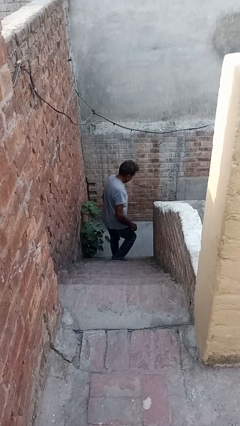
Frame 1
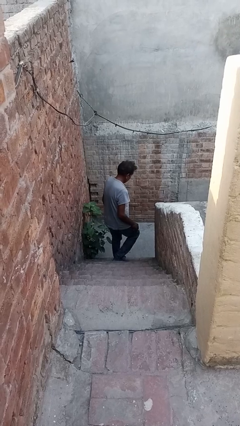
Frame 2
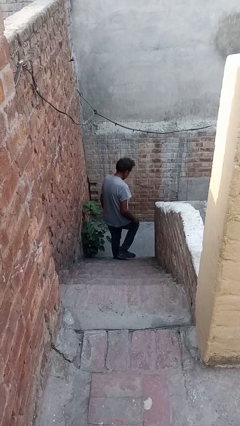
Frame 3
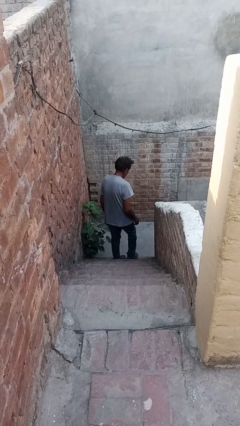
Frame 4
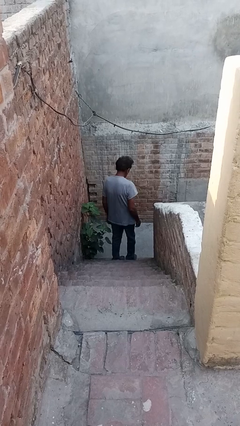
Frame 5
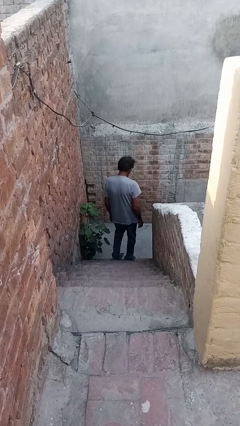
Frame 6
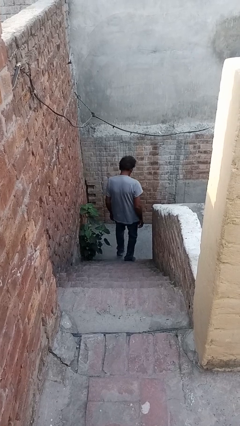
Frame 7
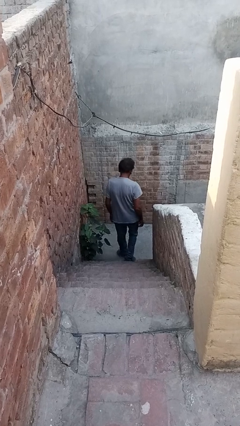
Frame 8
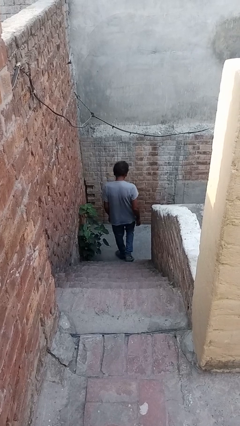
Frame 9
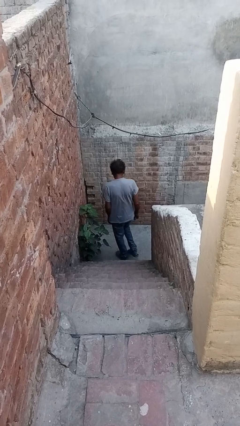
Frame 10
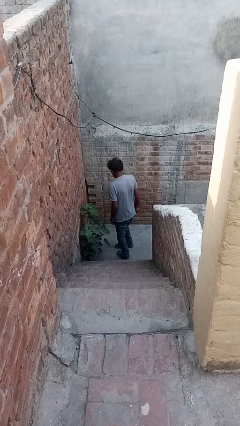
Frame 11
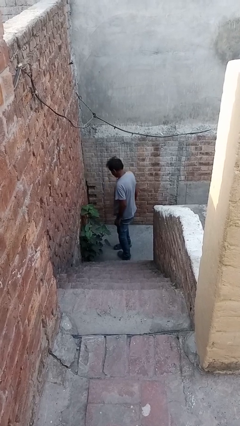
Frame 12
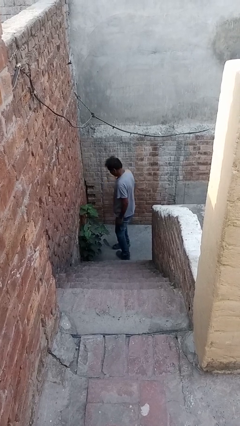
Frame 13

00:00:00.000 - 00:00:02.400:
person climbs down stairs

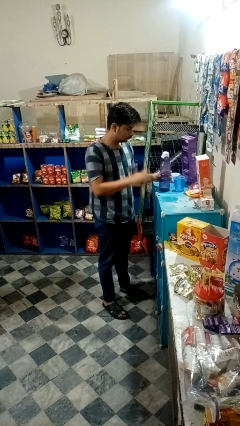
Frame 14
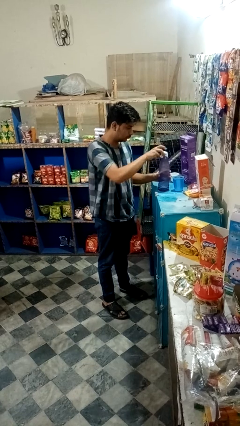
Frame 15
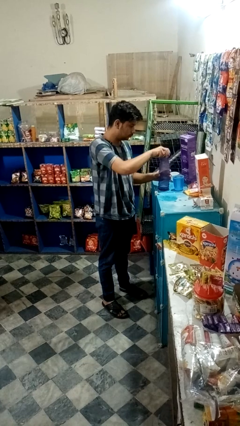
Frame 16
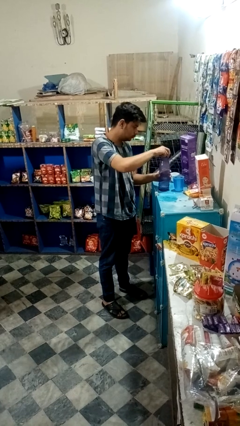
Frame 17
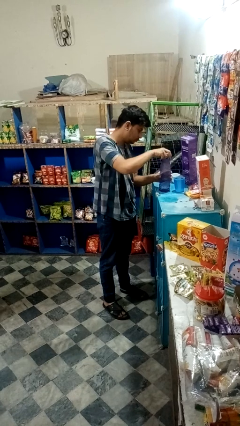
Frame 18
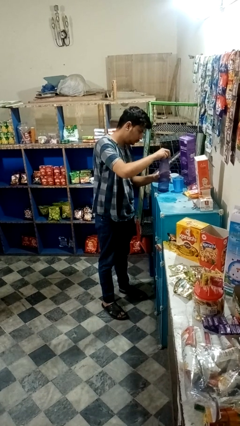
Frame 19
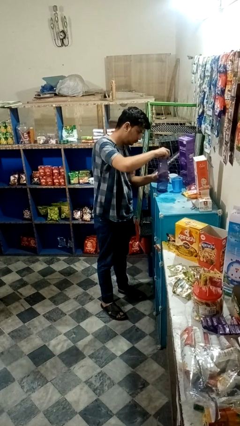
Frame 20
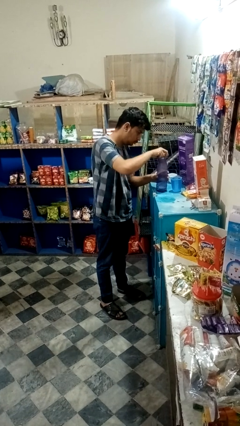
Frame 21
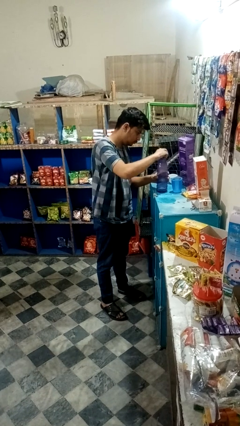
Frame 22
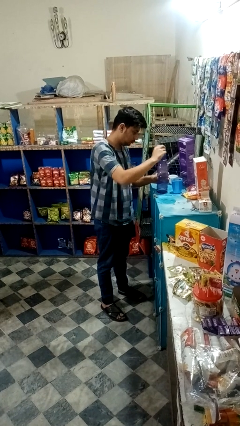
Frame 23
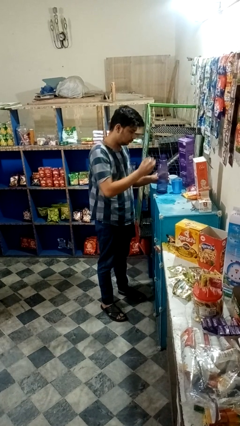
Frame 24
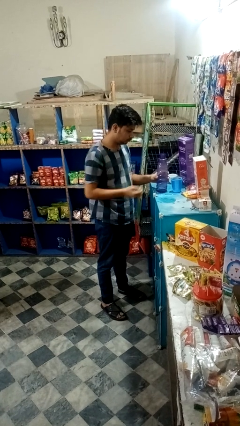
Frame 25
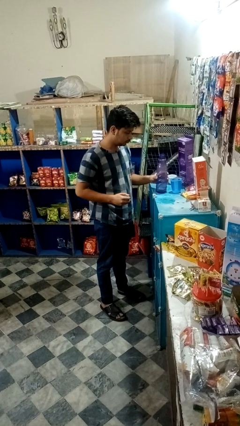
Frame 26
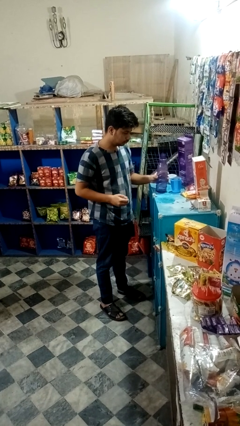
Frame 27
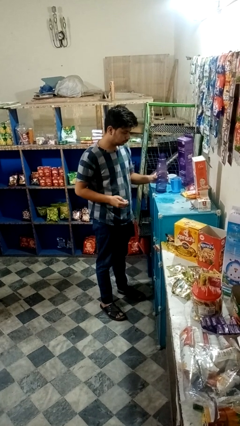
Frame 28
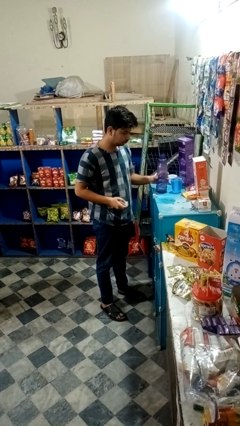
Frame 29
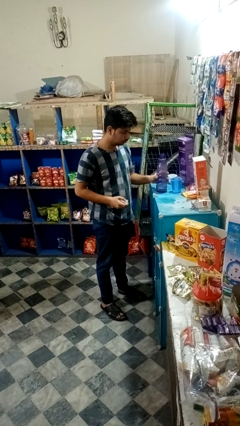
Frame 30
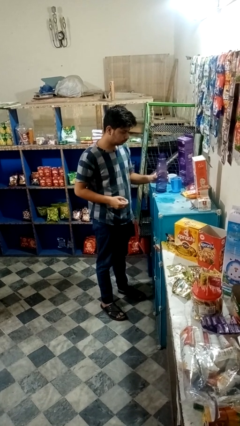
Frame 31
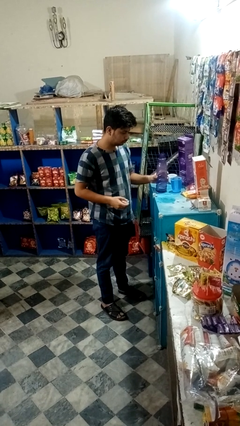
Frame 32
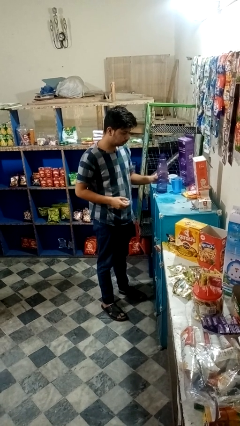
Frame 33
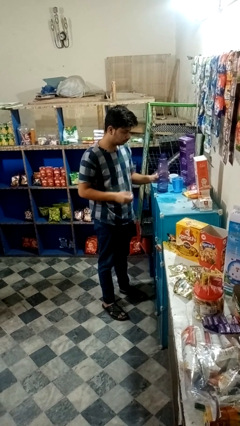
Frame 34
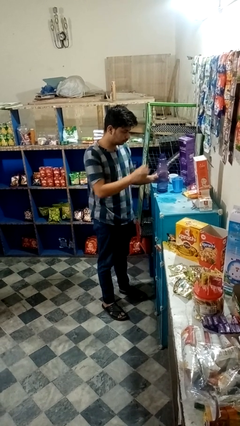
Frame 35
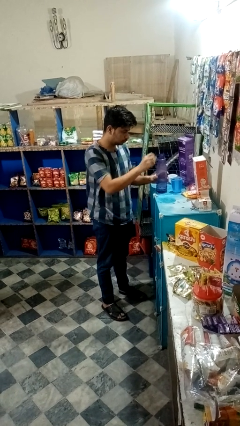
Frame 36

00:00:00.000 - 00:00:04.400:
person unscrews lid from bottle

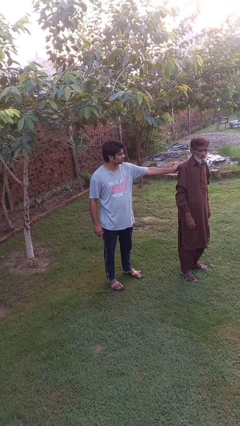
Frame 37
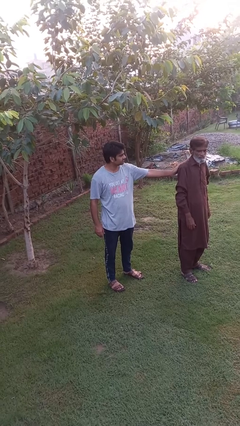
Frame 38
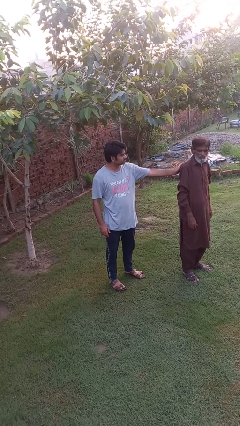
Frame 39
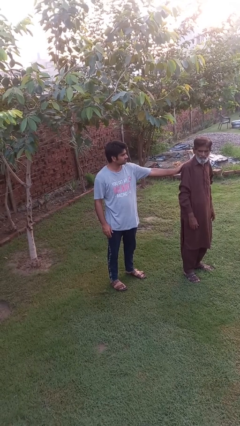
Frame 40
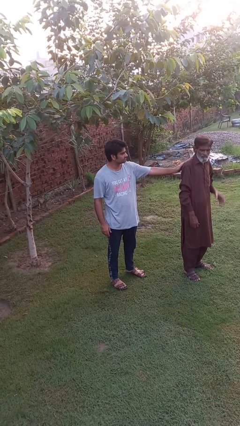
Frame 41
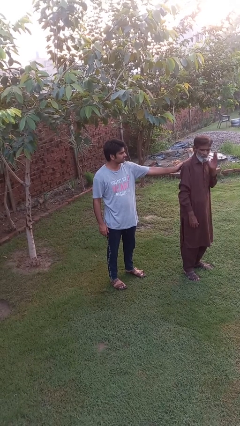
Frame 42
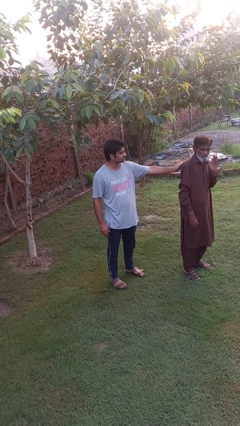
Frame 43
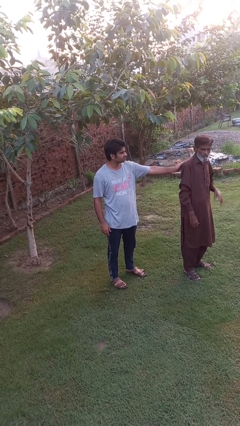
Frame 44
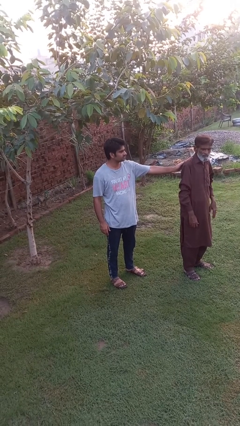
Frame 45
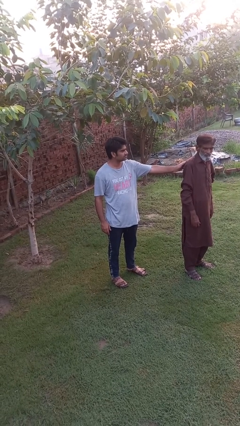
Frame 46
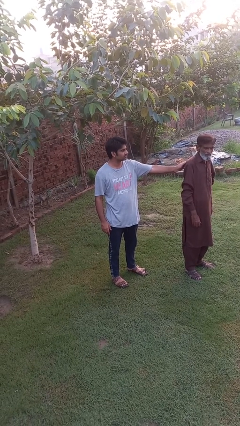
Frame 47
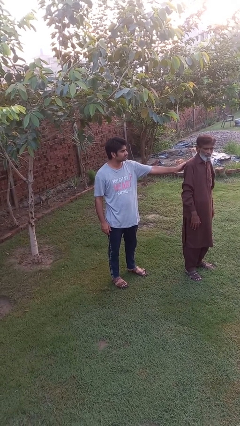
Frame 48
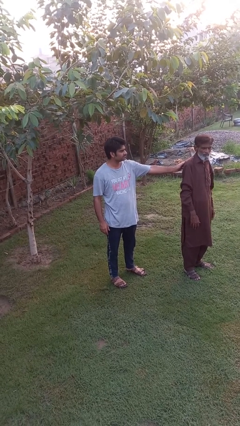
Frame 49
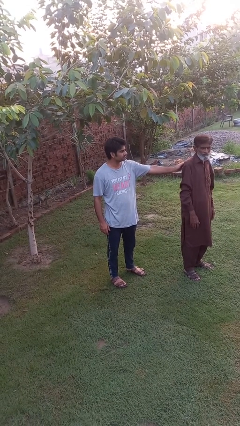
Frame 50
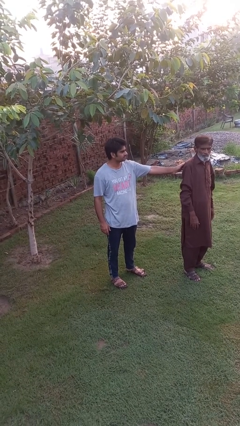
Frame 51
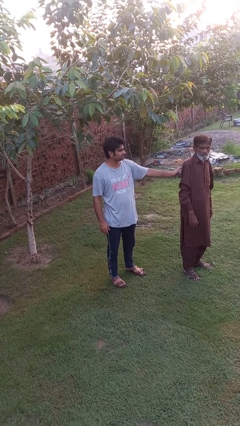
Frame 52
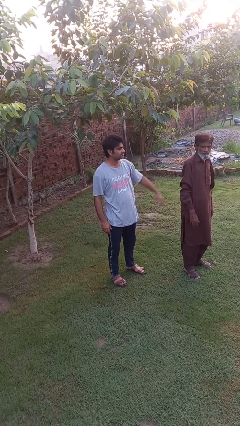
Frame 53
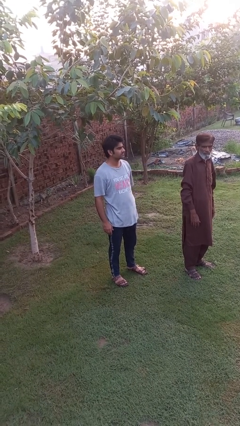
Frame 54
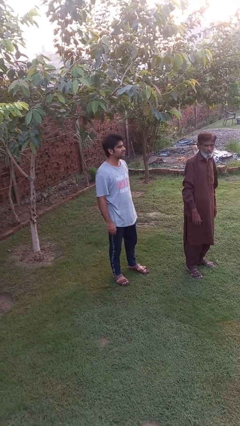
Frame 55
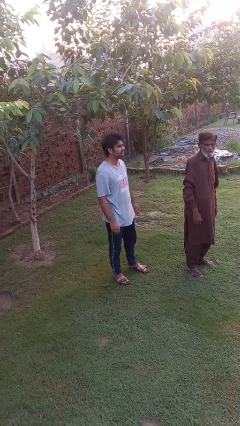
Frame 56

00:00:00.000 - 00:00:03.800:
person touches back of person

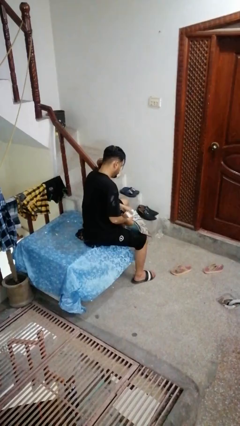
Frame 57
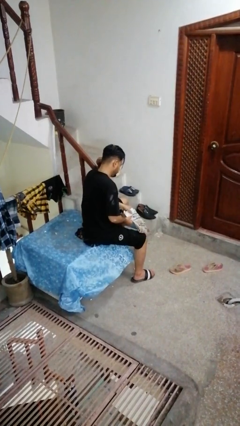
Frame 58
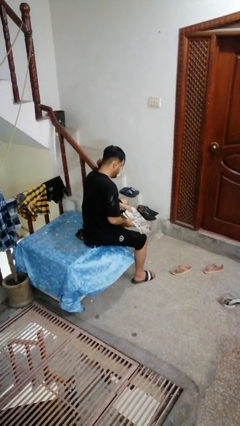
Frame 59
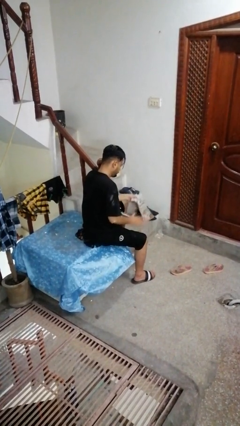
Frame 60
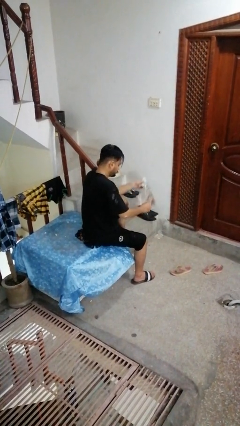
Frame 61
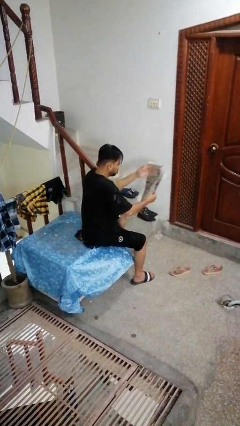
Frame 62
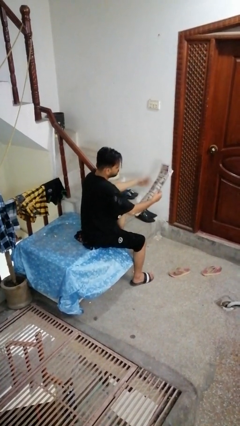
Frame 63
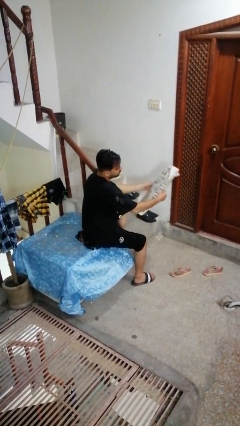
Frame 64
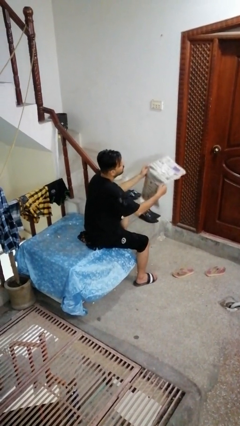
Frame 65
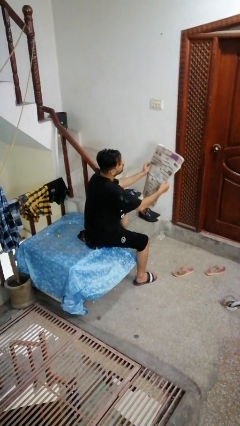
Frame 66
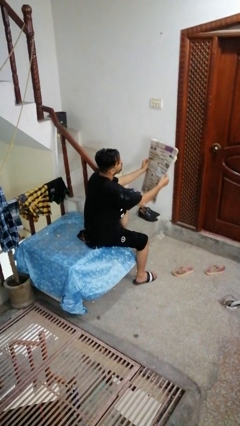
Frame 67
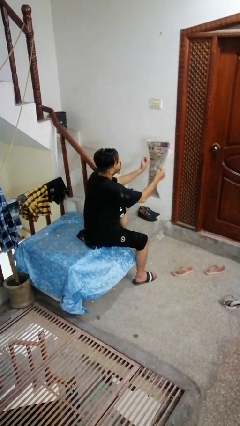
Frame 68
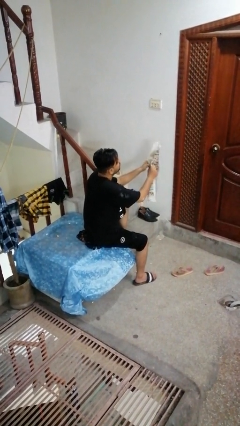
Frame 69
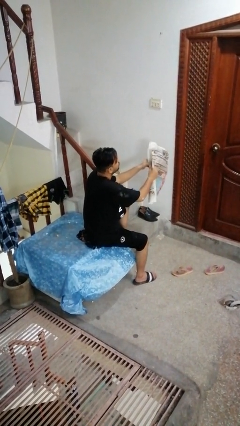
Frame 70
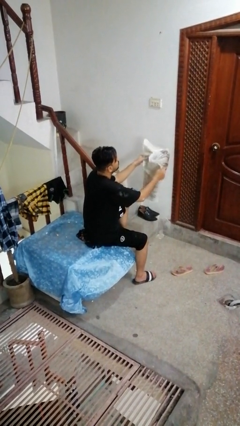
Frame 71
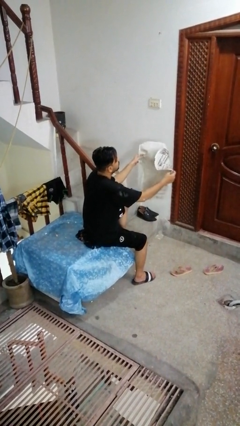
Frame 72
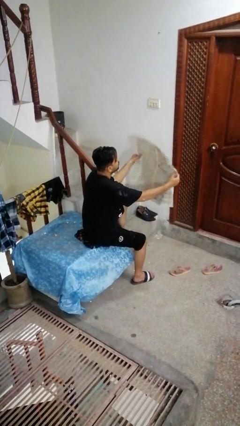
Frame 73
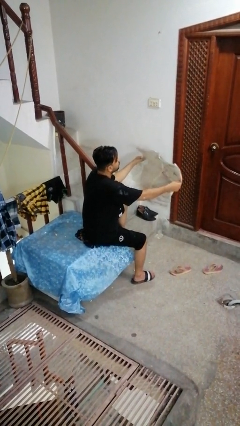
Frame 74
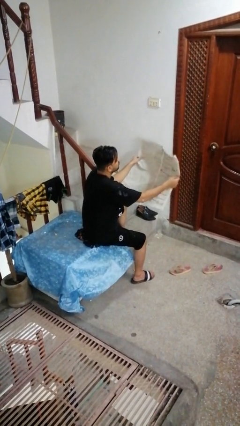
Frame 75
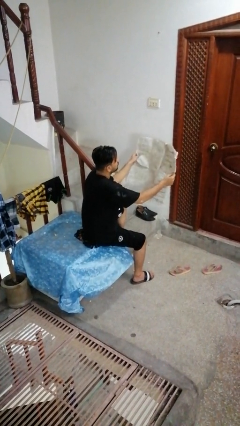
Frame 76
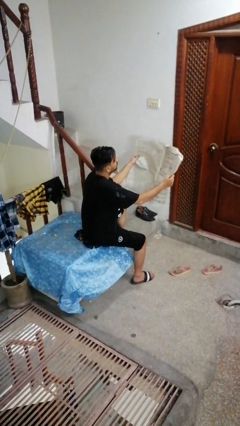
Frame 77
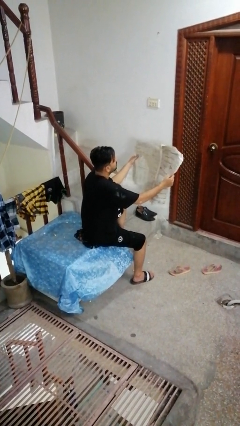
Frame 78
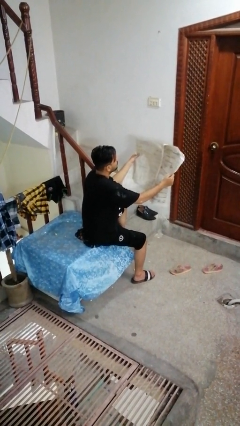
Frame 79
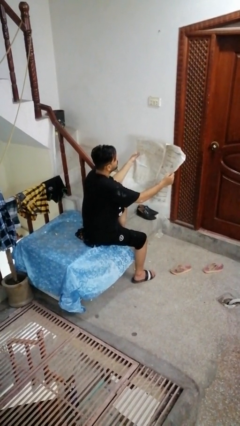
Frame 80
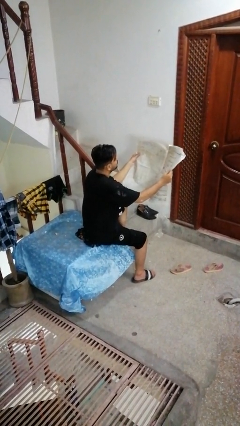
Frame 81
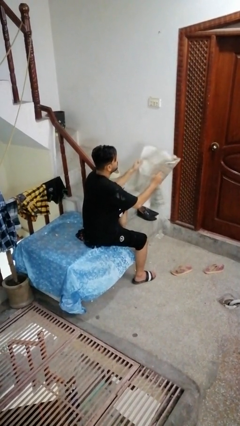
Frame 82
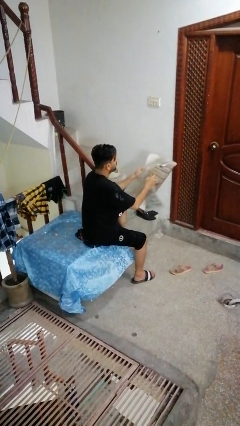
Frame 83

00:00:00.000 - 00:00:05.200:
person reads newspaper

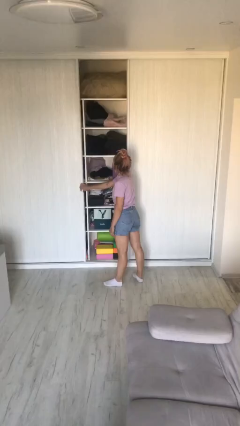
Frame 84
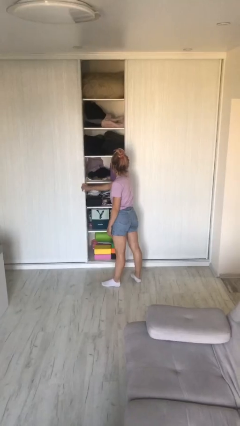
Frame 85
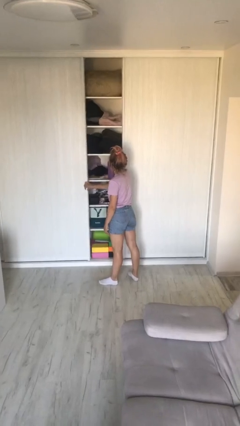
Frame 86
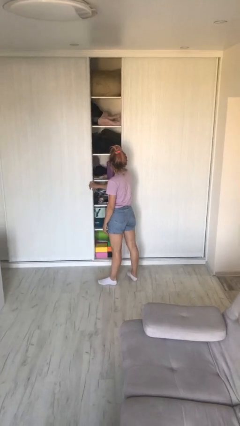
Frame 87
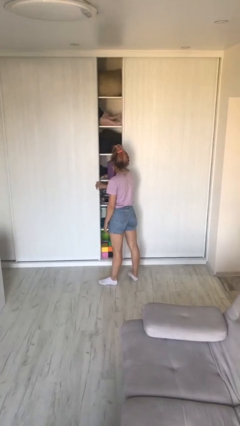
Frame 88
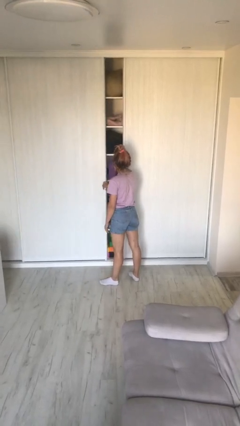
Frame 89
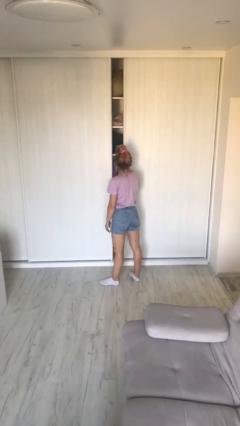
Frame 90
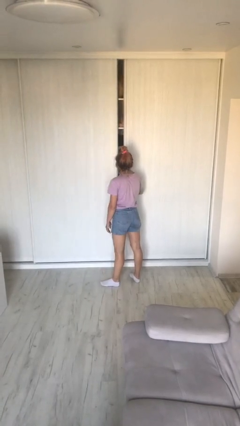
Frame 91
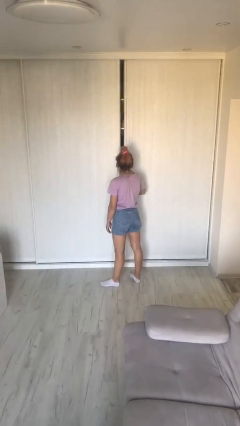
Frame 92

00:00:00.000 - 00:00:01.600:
person closes sliding door

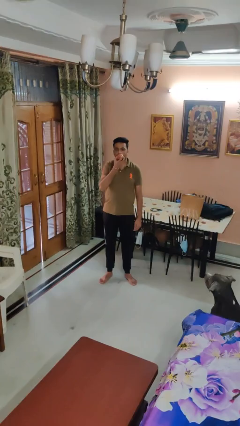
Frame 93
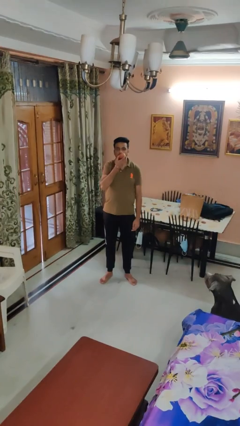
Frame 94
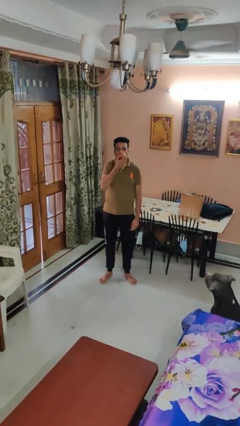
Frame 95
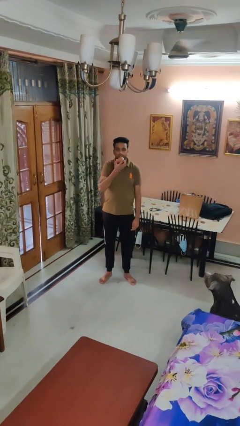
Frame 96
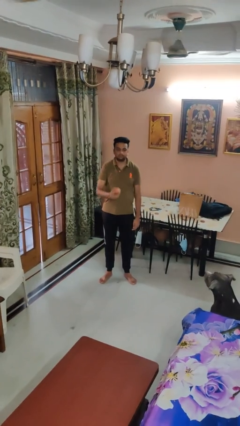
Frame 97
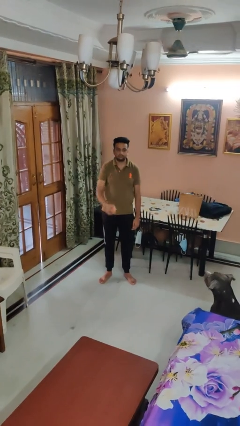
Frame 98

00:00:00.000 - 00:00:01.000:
person eats apple
